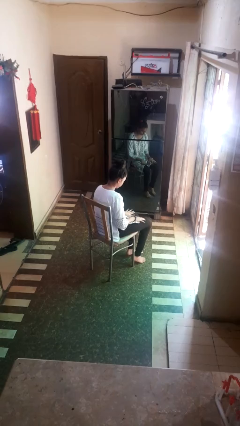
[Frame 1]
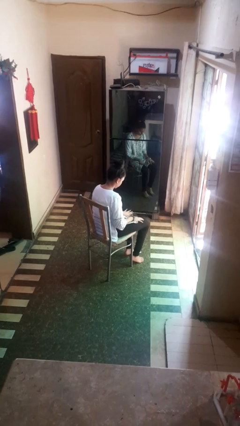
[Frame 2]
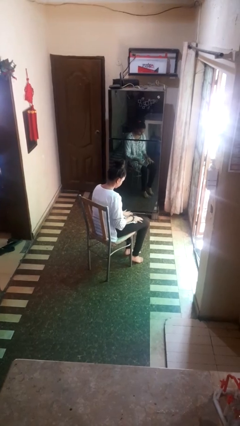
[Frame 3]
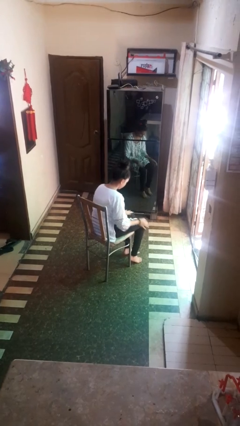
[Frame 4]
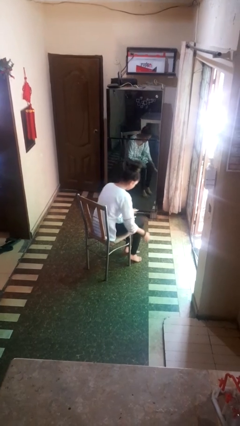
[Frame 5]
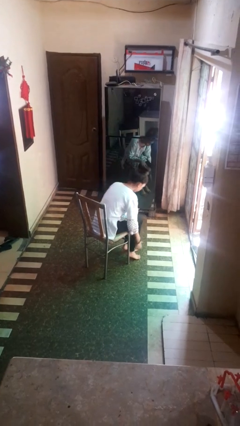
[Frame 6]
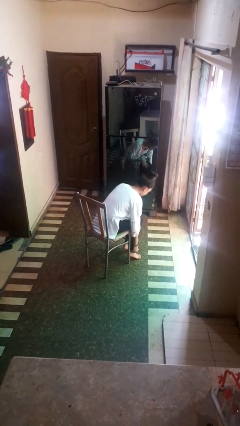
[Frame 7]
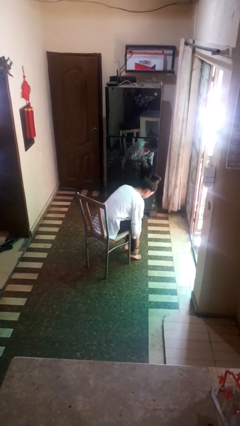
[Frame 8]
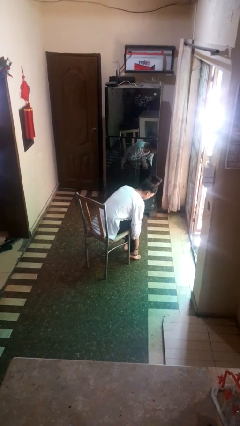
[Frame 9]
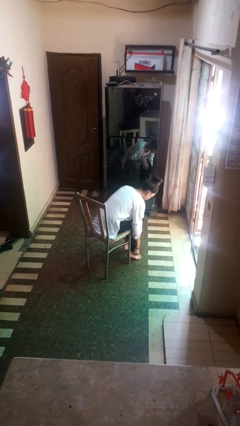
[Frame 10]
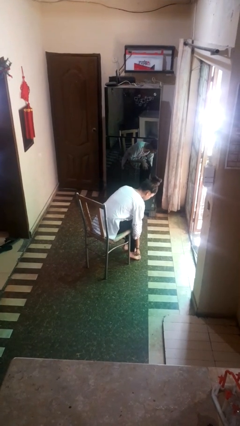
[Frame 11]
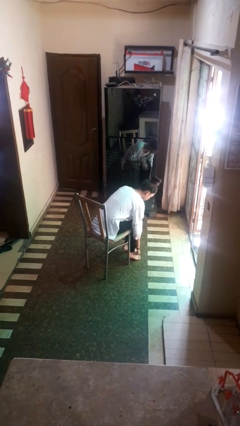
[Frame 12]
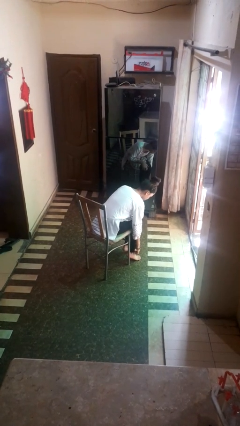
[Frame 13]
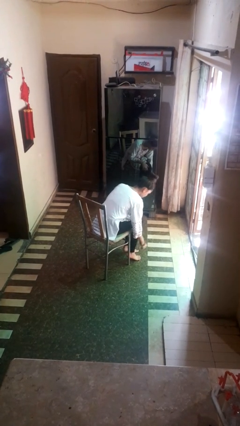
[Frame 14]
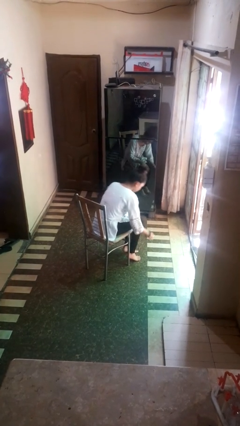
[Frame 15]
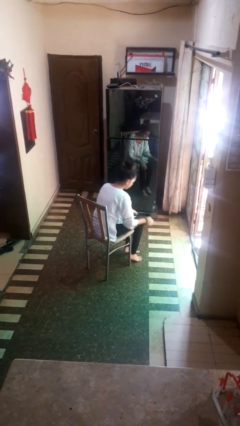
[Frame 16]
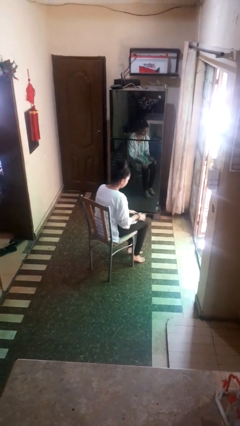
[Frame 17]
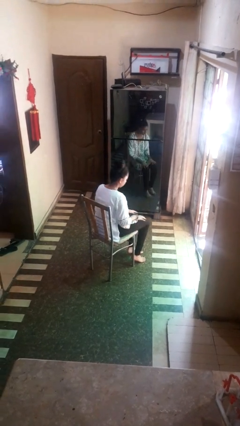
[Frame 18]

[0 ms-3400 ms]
person rubs foot

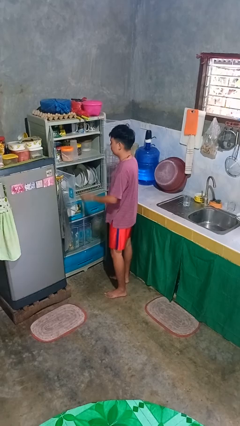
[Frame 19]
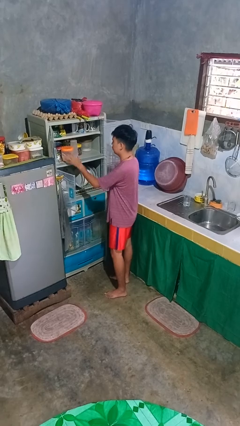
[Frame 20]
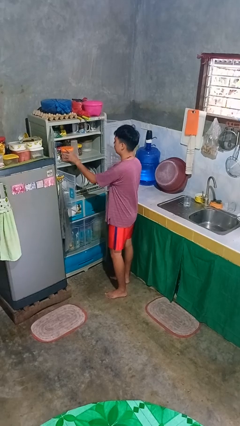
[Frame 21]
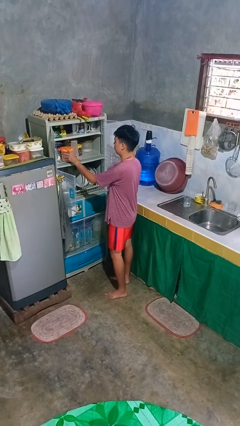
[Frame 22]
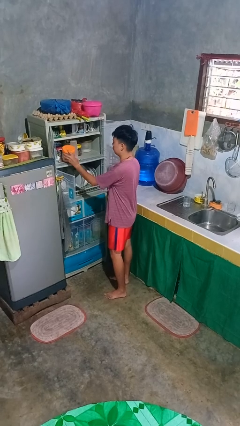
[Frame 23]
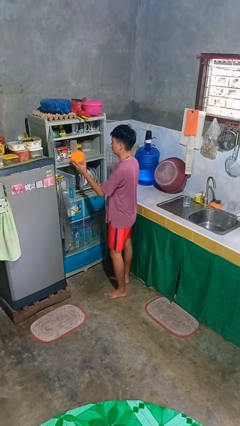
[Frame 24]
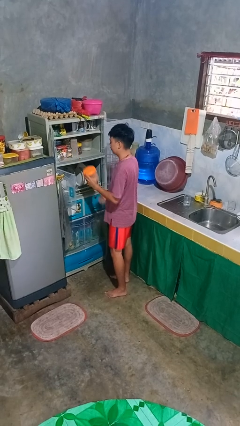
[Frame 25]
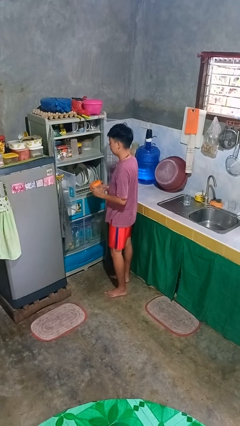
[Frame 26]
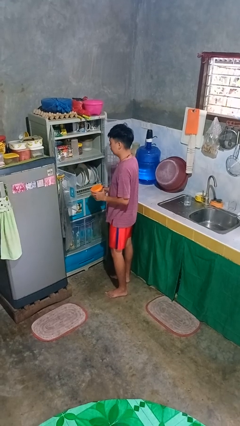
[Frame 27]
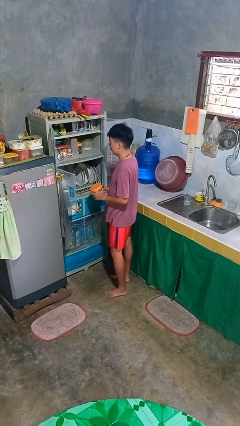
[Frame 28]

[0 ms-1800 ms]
person takes object from cabinet

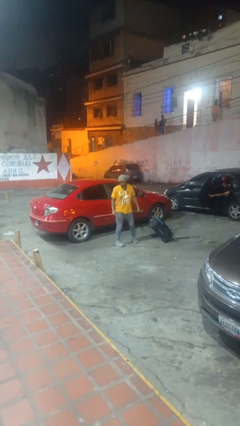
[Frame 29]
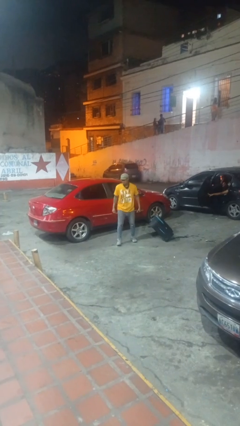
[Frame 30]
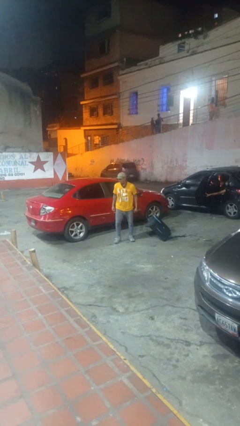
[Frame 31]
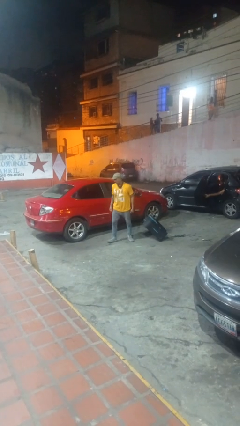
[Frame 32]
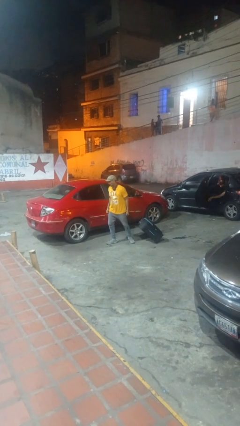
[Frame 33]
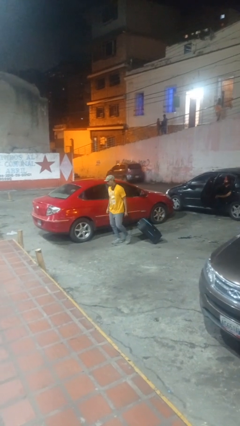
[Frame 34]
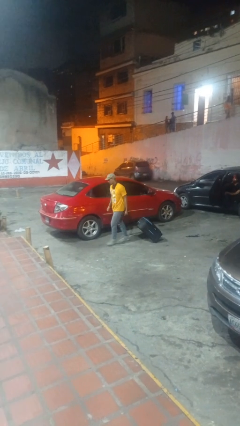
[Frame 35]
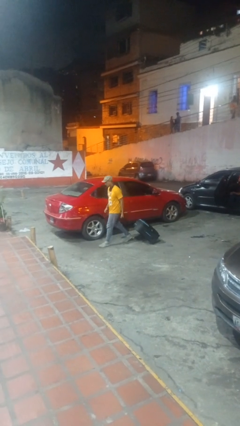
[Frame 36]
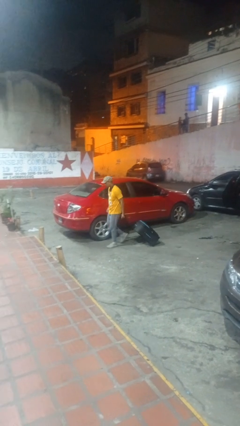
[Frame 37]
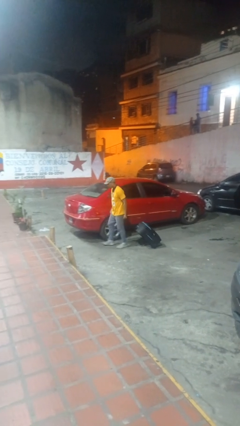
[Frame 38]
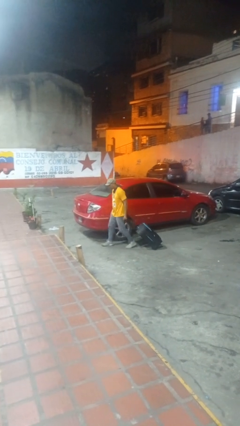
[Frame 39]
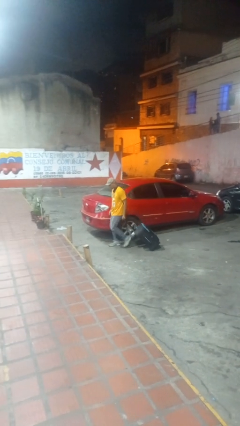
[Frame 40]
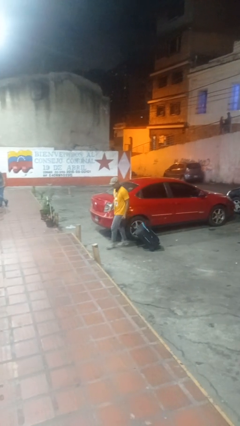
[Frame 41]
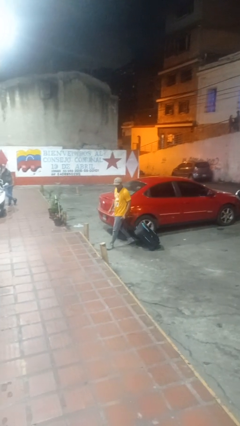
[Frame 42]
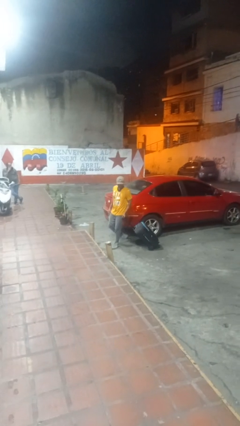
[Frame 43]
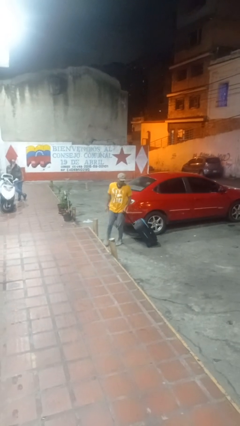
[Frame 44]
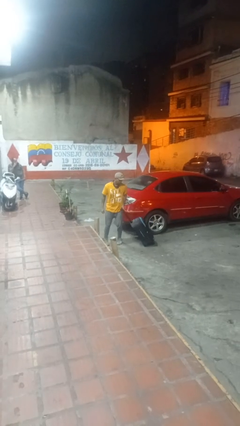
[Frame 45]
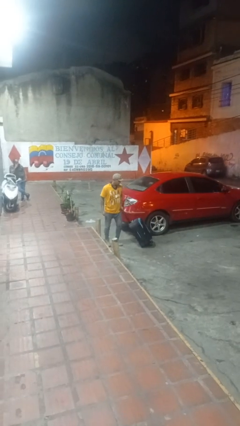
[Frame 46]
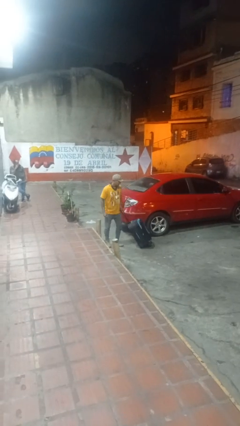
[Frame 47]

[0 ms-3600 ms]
person pulls wheeled cart

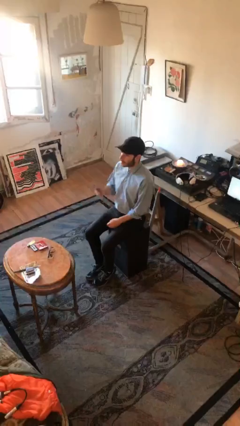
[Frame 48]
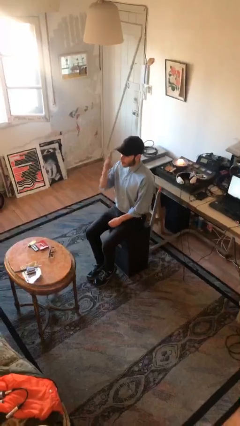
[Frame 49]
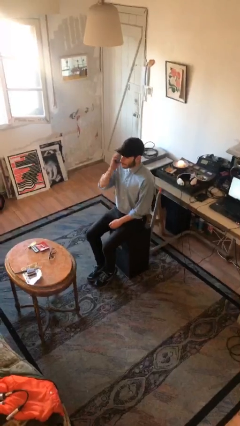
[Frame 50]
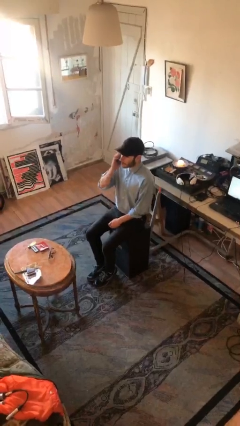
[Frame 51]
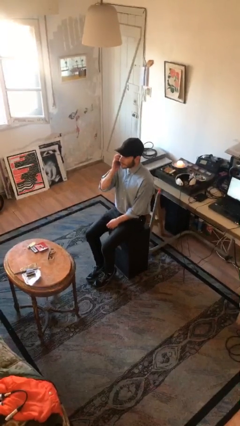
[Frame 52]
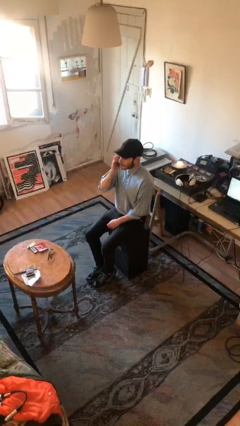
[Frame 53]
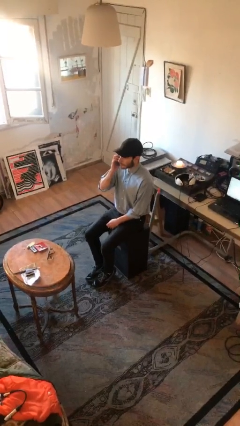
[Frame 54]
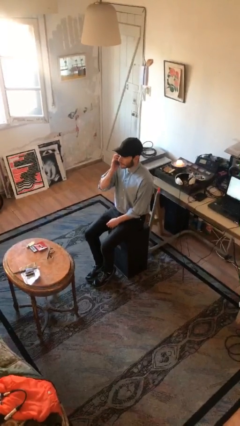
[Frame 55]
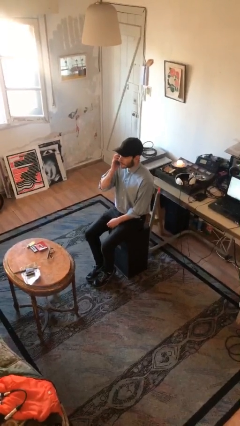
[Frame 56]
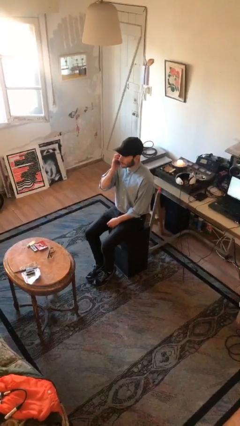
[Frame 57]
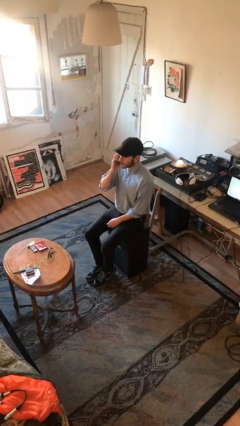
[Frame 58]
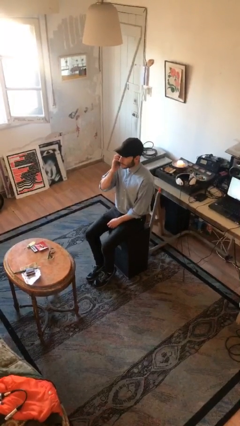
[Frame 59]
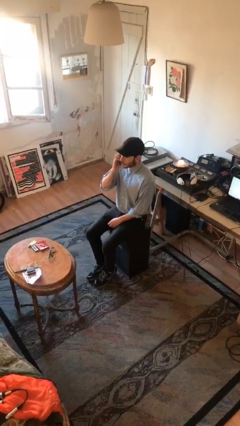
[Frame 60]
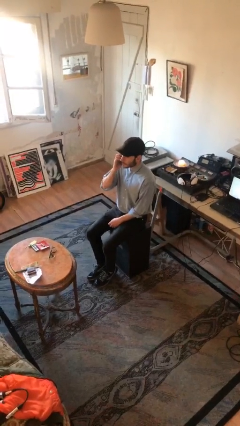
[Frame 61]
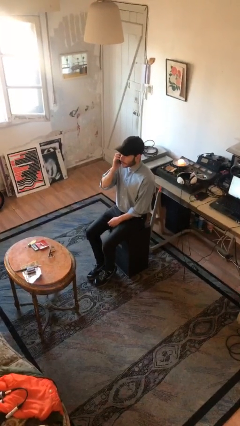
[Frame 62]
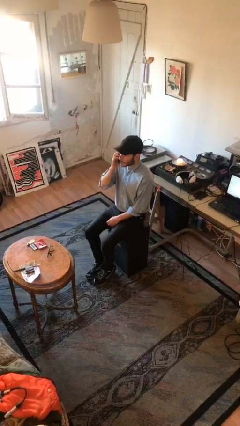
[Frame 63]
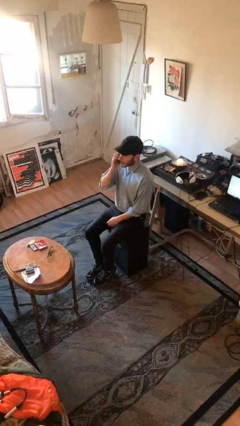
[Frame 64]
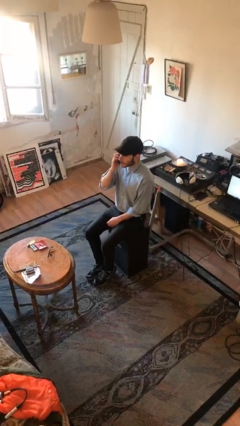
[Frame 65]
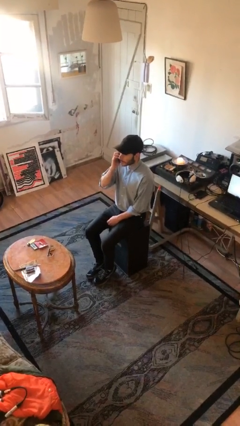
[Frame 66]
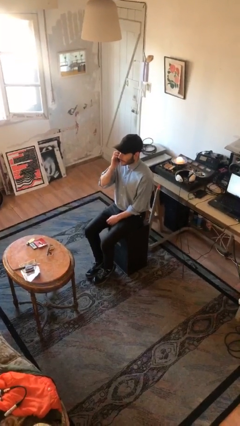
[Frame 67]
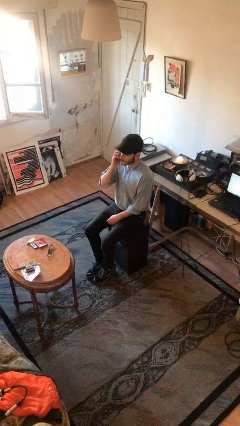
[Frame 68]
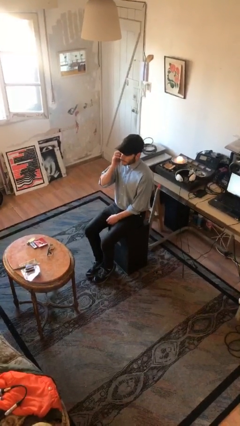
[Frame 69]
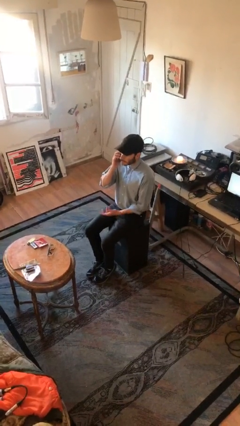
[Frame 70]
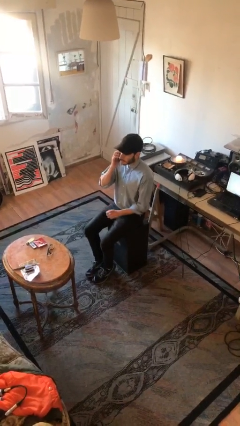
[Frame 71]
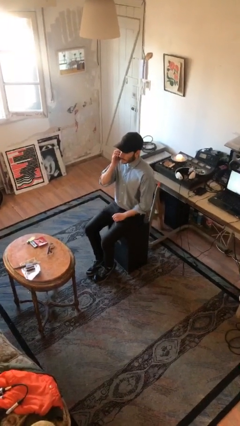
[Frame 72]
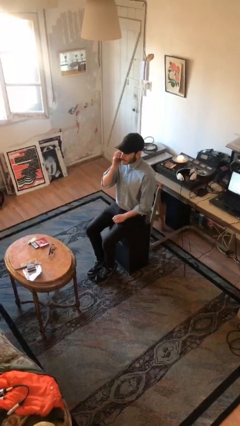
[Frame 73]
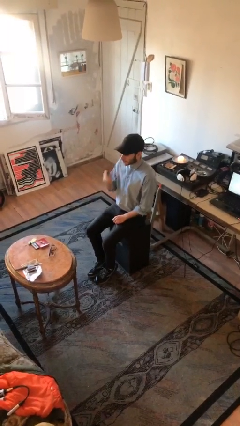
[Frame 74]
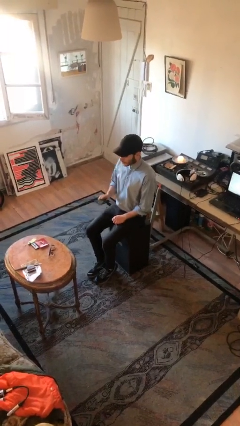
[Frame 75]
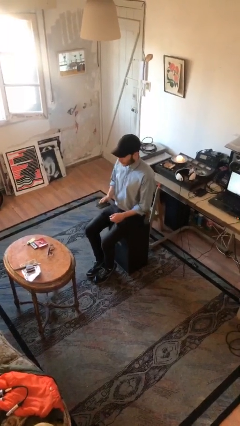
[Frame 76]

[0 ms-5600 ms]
person talks on phone
